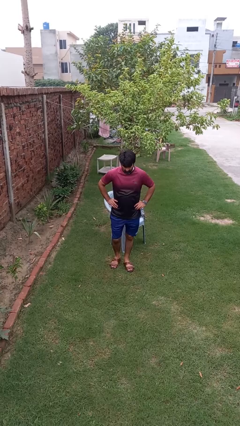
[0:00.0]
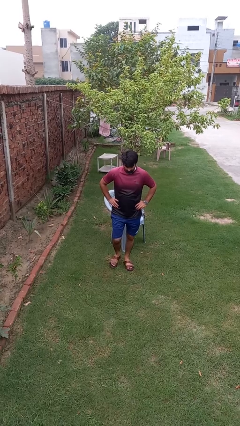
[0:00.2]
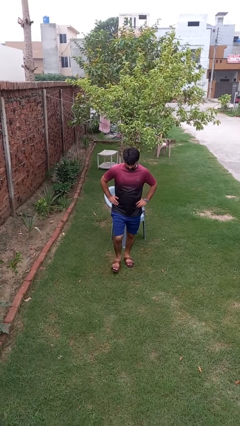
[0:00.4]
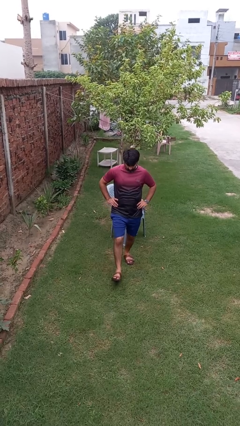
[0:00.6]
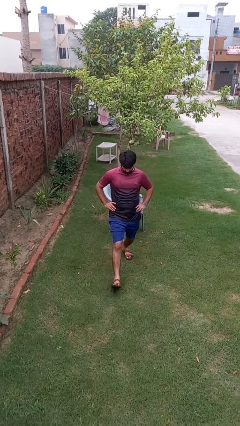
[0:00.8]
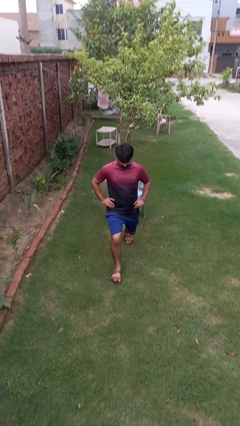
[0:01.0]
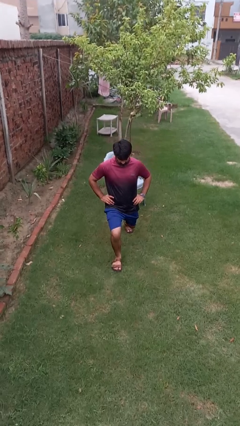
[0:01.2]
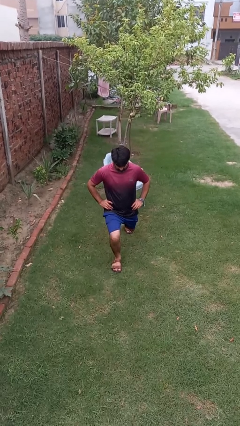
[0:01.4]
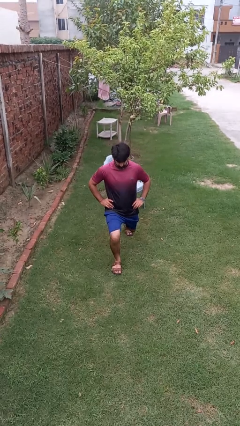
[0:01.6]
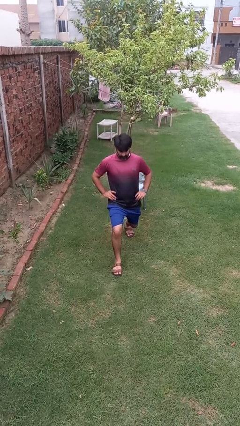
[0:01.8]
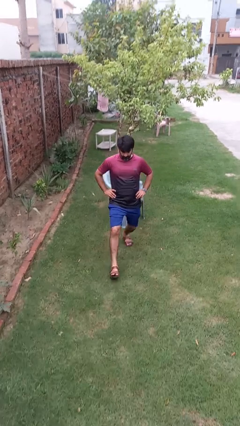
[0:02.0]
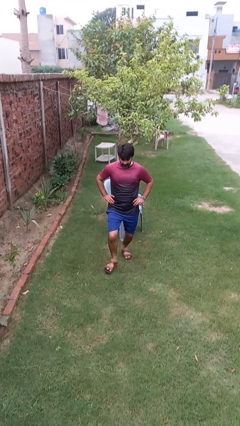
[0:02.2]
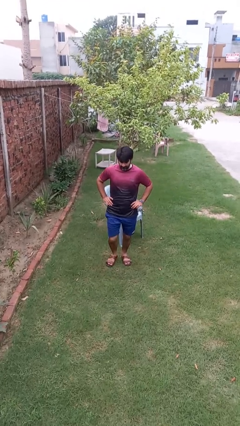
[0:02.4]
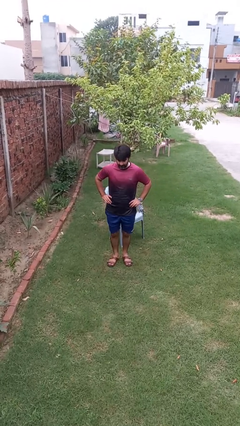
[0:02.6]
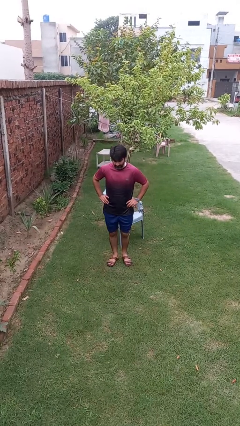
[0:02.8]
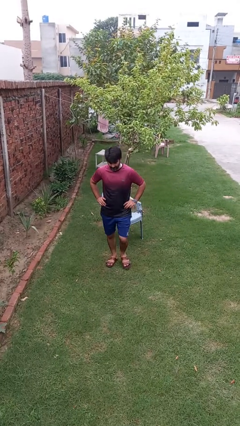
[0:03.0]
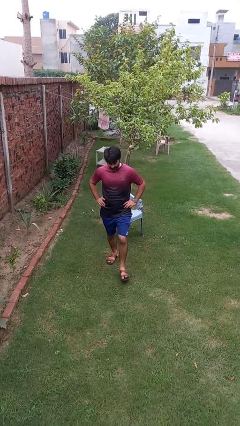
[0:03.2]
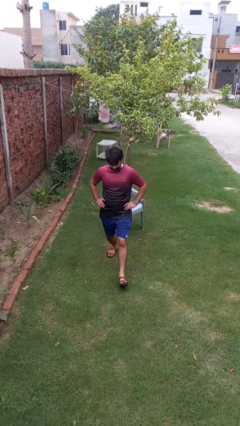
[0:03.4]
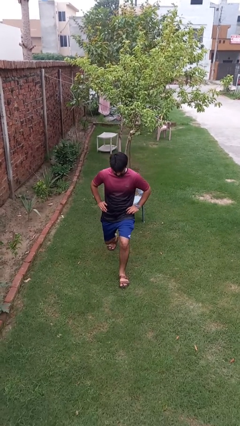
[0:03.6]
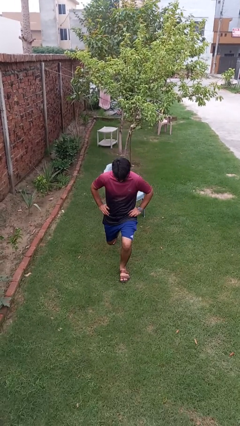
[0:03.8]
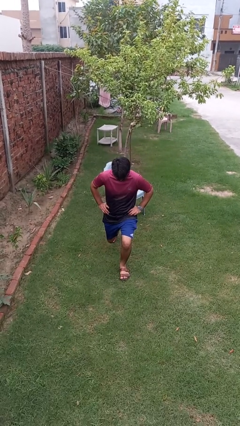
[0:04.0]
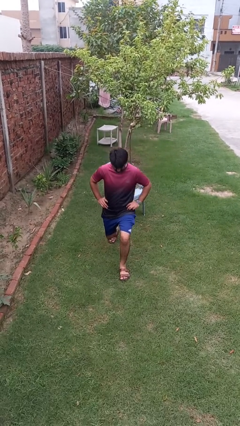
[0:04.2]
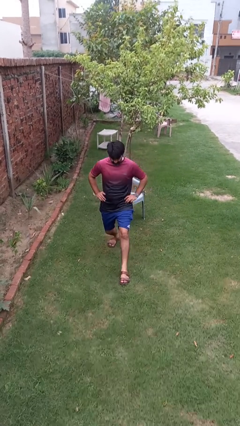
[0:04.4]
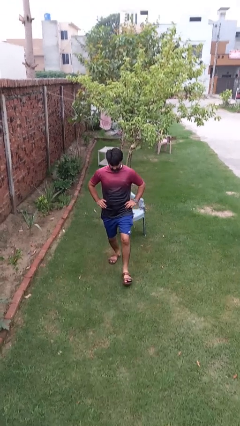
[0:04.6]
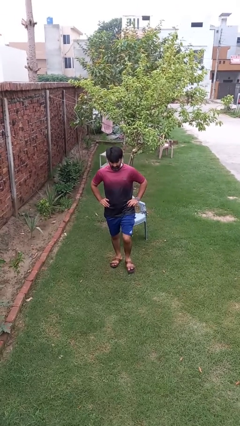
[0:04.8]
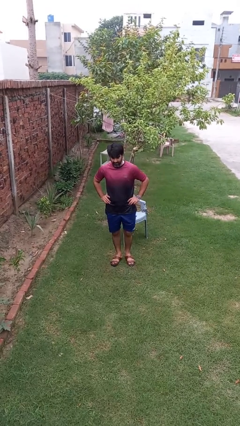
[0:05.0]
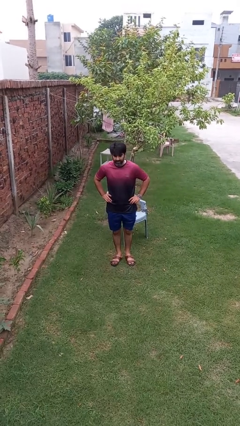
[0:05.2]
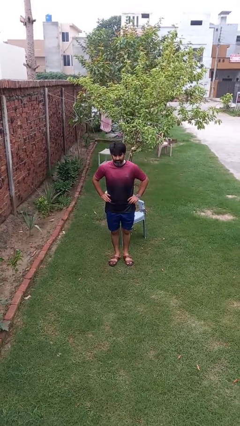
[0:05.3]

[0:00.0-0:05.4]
person exercises with lunges

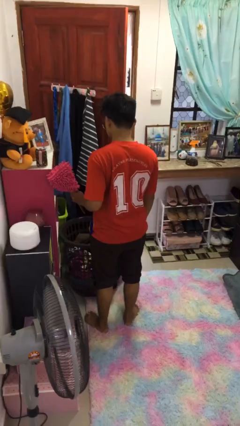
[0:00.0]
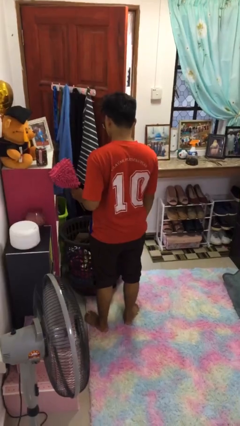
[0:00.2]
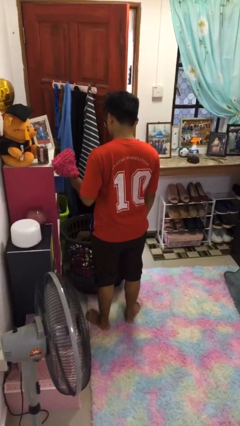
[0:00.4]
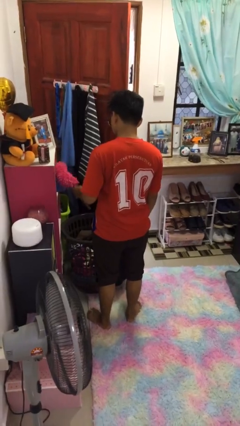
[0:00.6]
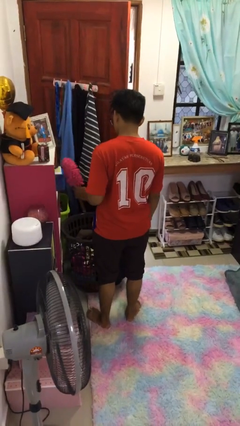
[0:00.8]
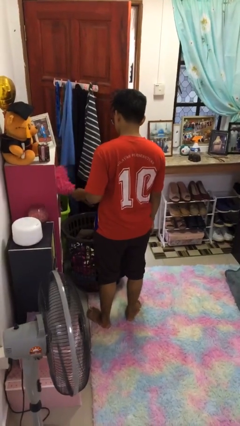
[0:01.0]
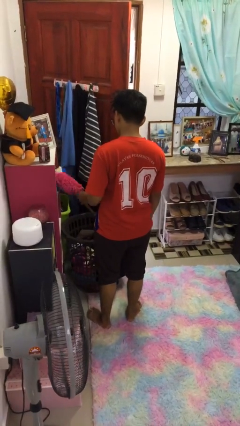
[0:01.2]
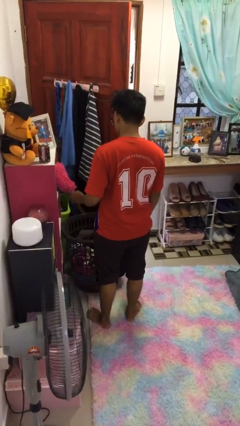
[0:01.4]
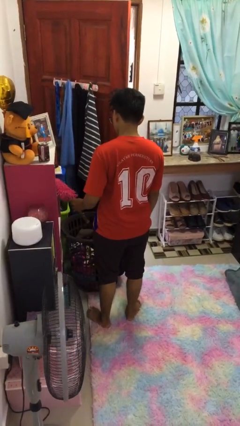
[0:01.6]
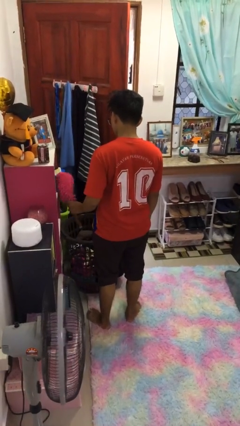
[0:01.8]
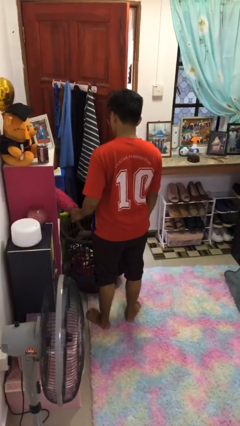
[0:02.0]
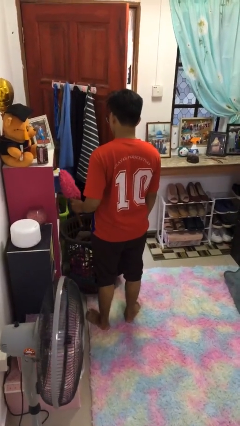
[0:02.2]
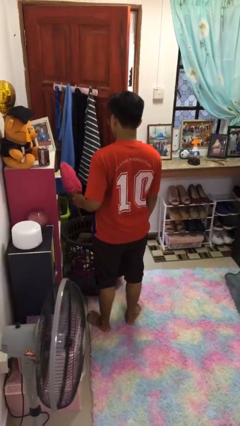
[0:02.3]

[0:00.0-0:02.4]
person dusts furniture

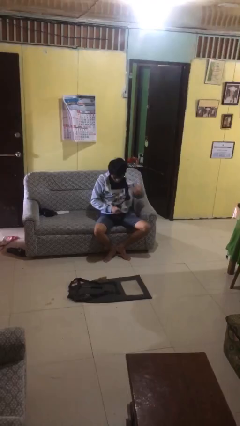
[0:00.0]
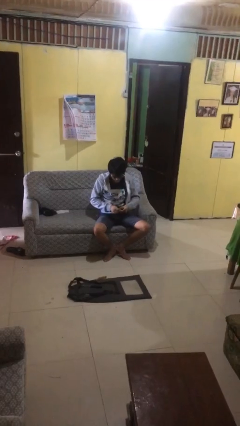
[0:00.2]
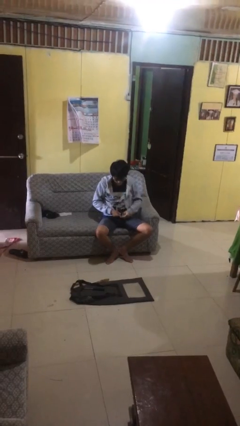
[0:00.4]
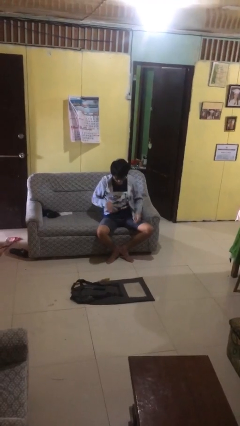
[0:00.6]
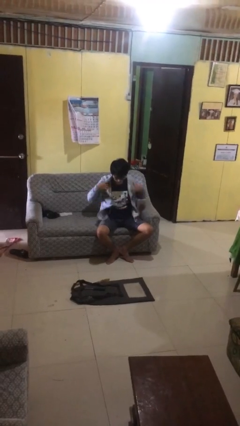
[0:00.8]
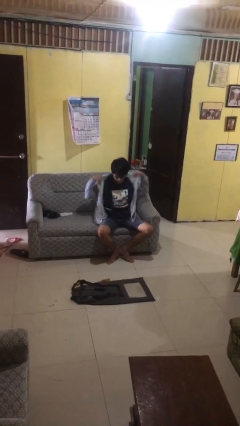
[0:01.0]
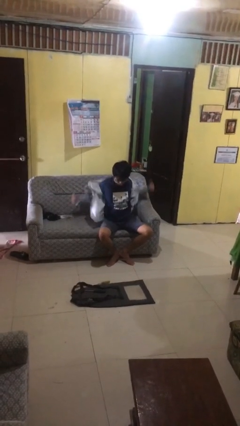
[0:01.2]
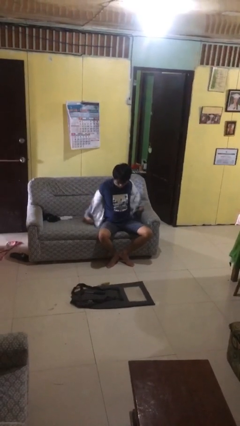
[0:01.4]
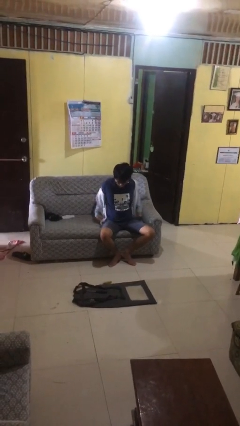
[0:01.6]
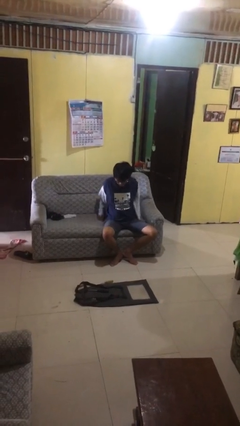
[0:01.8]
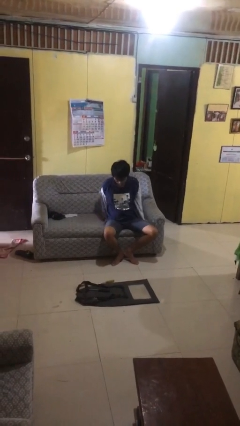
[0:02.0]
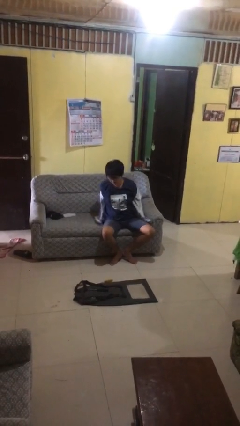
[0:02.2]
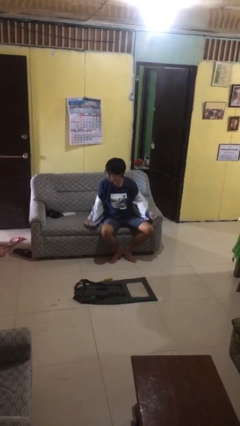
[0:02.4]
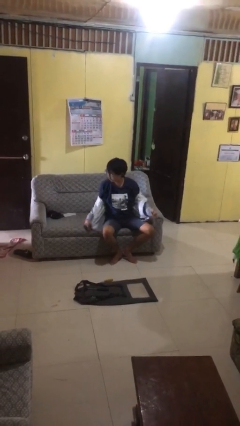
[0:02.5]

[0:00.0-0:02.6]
person takes off jacket

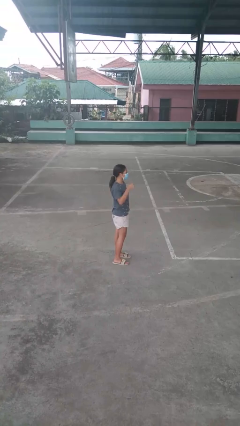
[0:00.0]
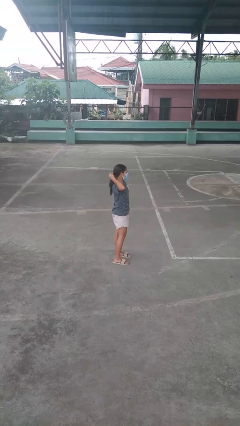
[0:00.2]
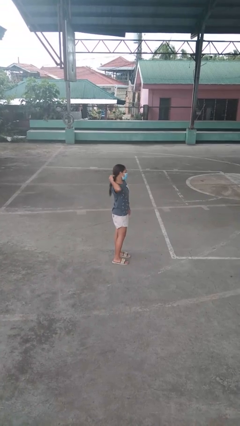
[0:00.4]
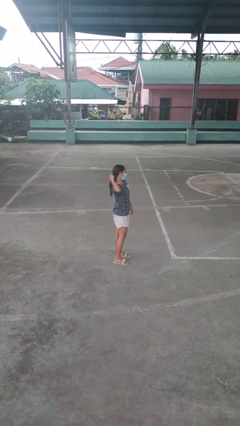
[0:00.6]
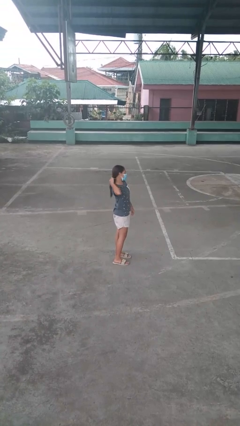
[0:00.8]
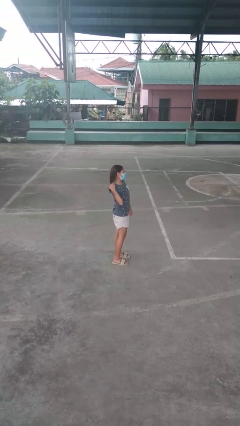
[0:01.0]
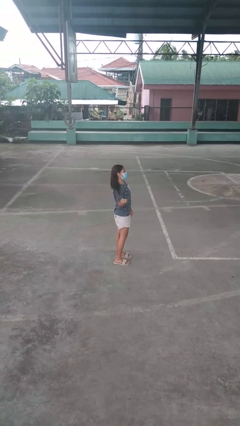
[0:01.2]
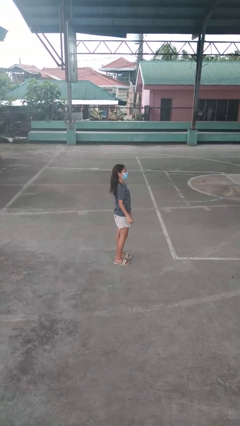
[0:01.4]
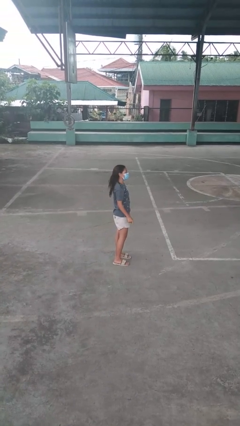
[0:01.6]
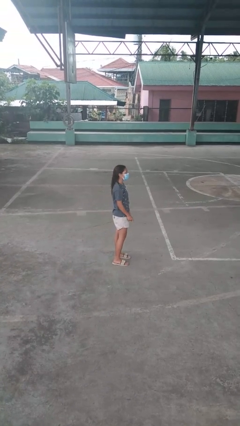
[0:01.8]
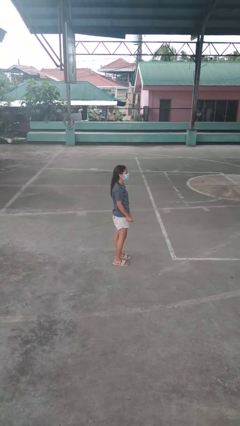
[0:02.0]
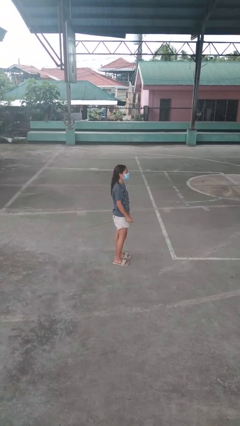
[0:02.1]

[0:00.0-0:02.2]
person takes off hairtie

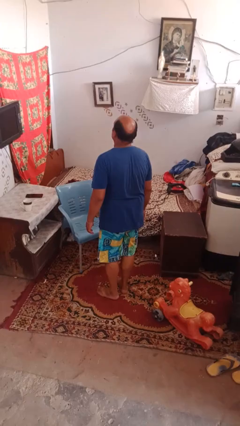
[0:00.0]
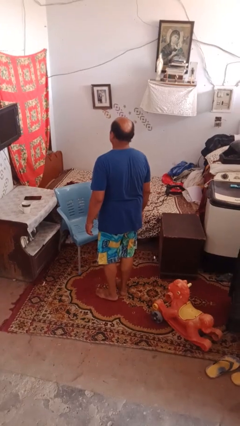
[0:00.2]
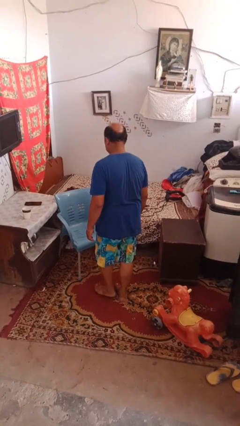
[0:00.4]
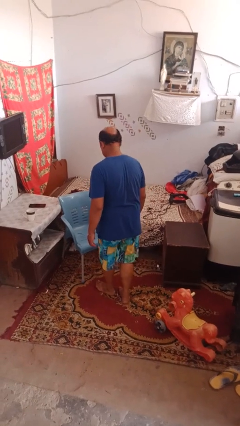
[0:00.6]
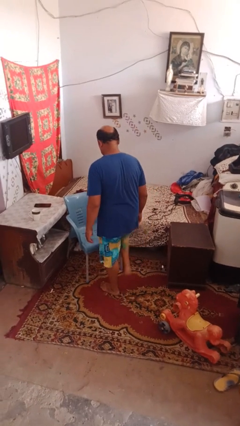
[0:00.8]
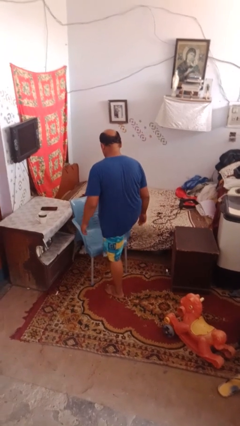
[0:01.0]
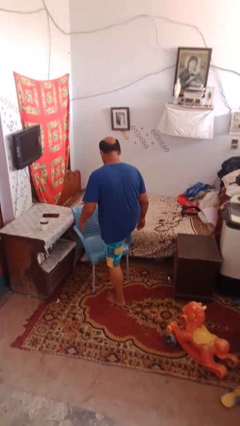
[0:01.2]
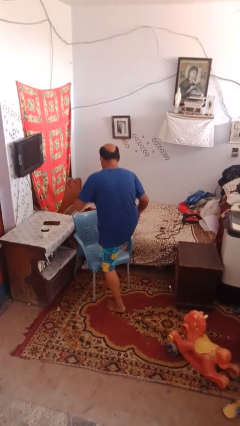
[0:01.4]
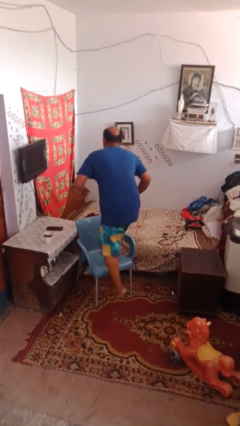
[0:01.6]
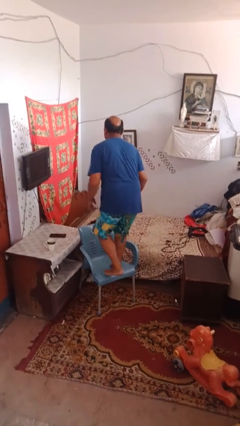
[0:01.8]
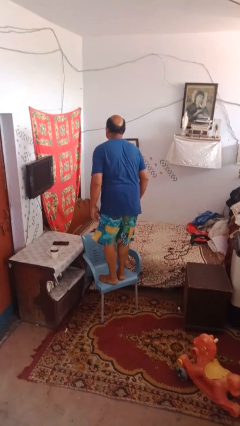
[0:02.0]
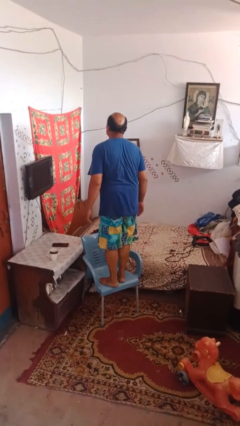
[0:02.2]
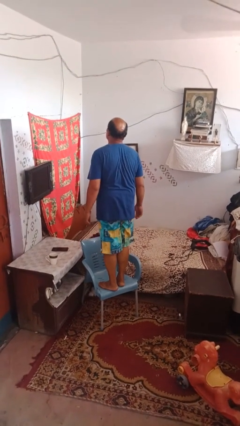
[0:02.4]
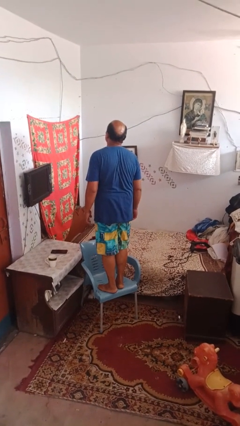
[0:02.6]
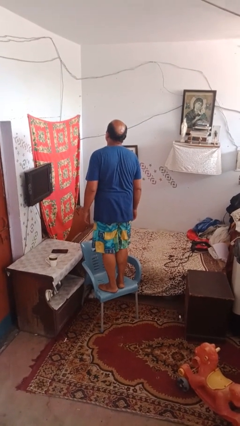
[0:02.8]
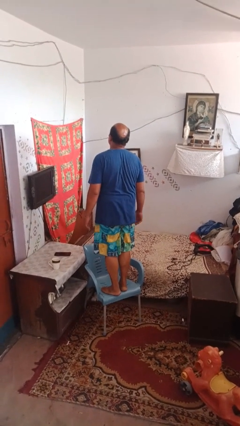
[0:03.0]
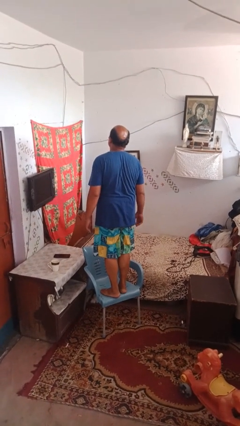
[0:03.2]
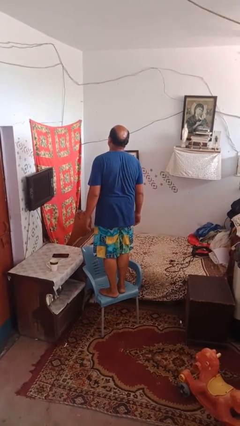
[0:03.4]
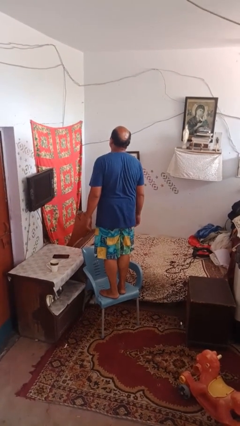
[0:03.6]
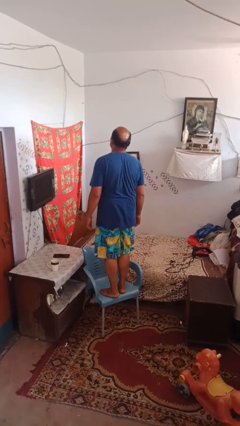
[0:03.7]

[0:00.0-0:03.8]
person climbs on chair

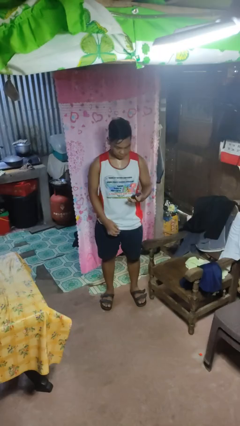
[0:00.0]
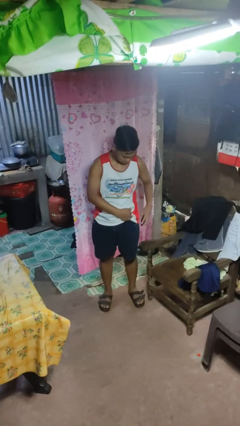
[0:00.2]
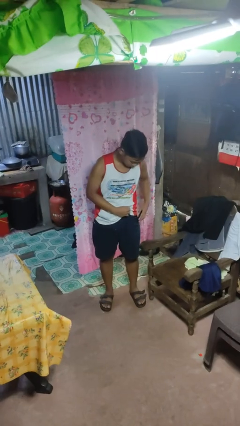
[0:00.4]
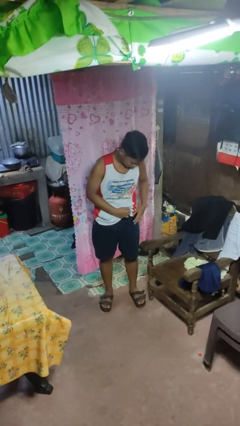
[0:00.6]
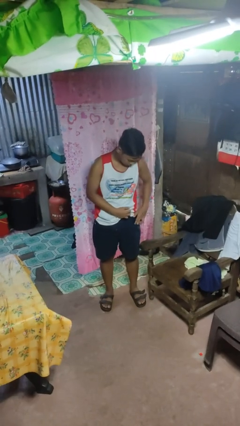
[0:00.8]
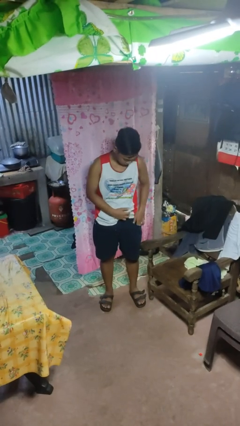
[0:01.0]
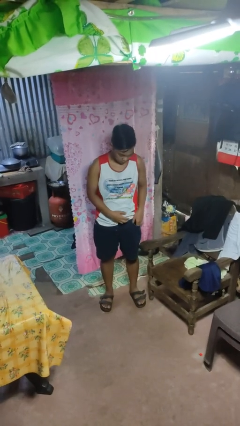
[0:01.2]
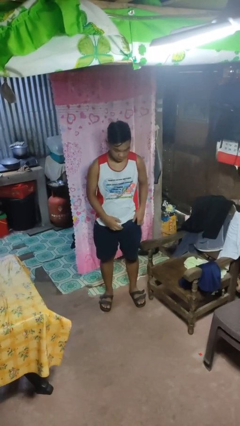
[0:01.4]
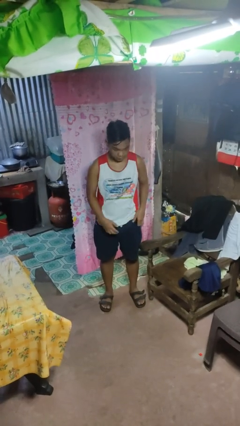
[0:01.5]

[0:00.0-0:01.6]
person puts phone into pocket
